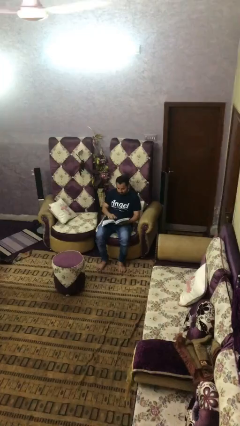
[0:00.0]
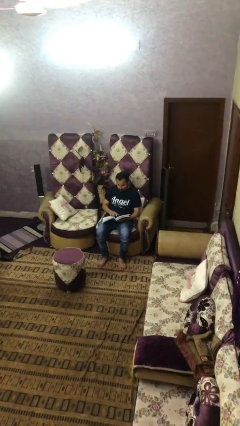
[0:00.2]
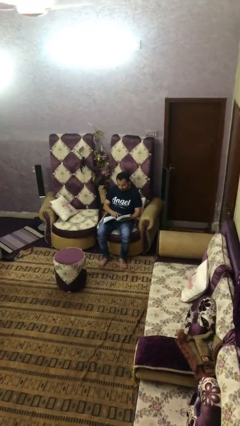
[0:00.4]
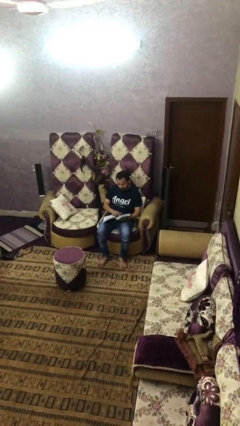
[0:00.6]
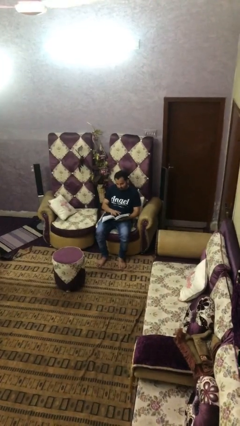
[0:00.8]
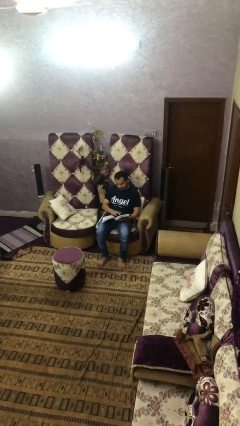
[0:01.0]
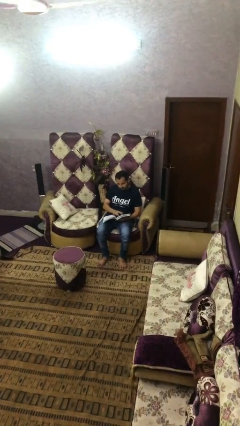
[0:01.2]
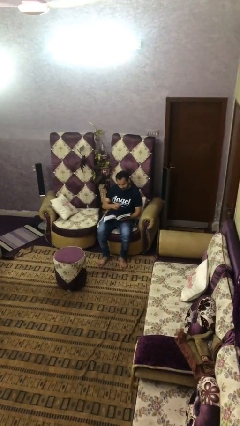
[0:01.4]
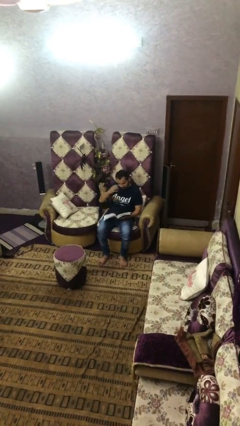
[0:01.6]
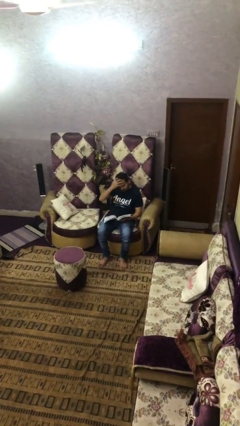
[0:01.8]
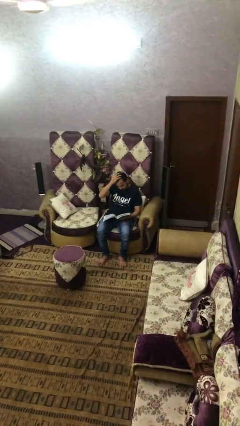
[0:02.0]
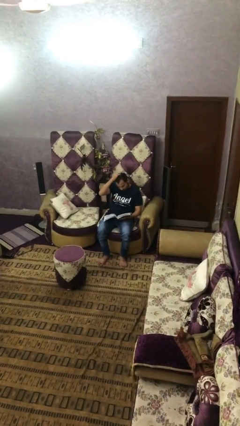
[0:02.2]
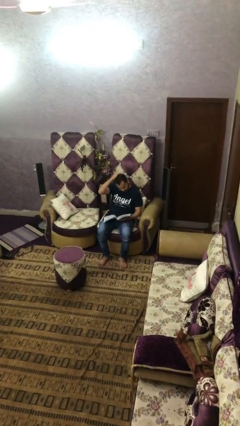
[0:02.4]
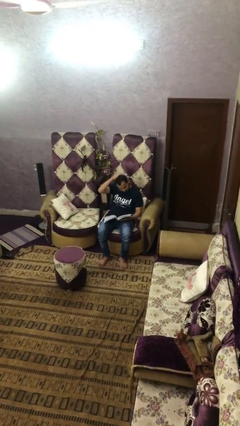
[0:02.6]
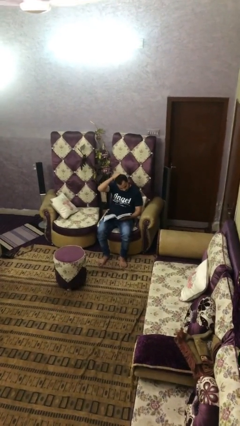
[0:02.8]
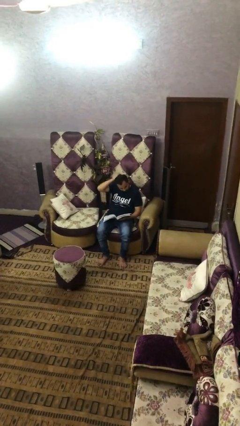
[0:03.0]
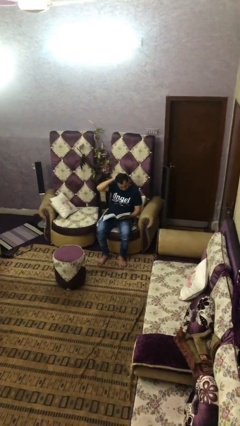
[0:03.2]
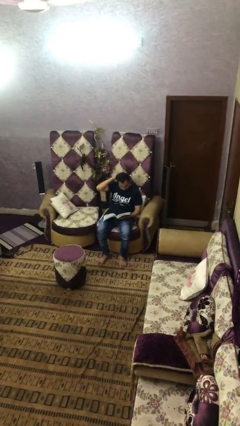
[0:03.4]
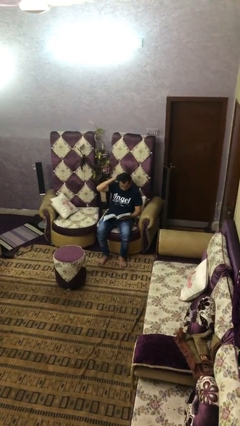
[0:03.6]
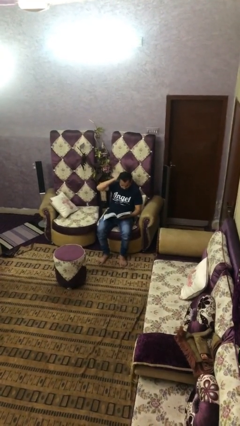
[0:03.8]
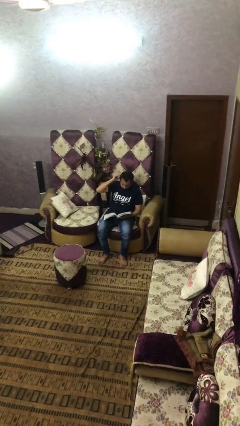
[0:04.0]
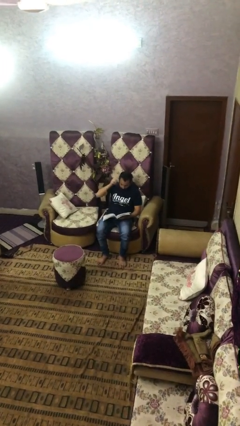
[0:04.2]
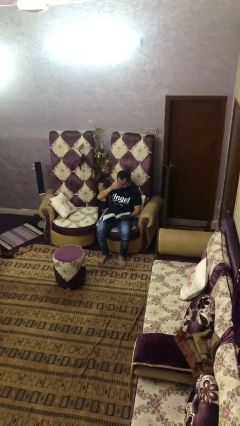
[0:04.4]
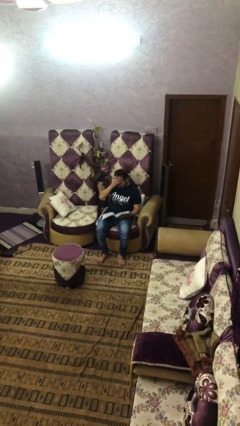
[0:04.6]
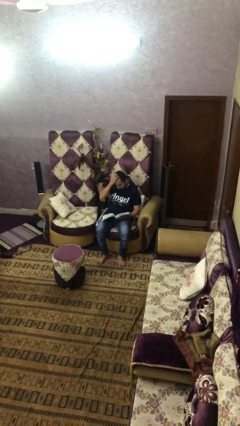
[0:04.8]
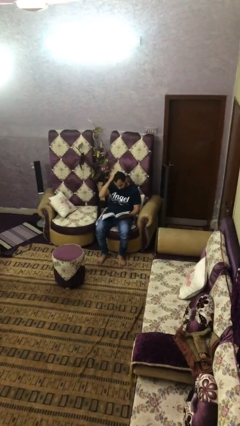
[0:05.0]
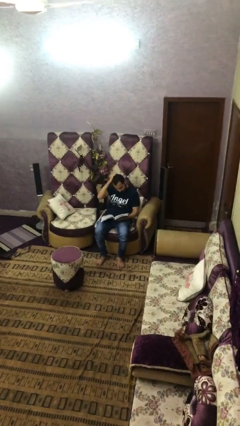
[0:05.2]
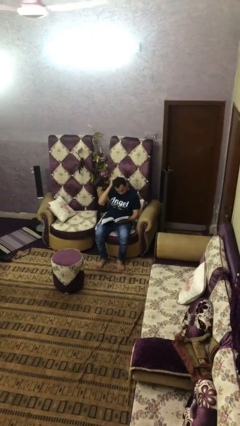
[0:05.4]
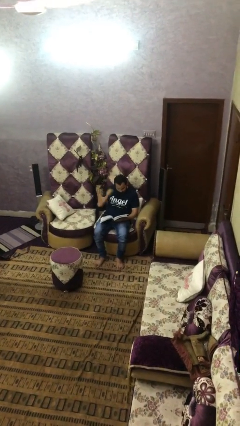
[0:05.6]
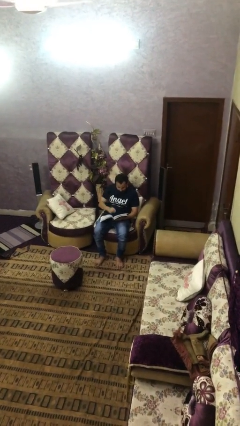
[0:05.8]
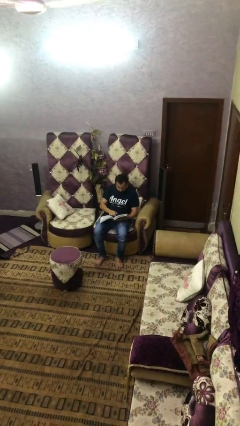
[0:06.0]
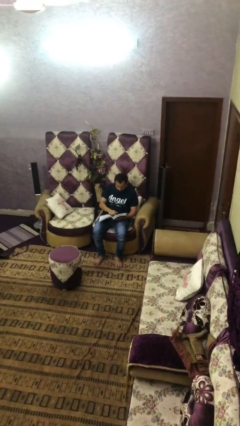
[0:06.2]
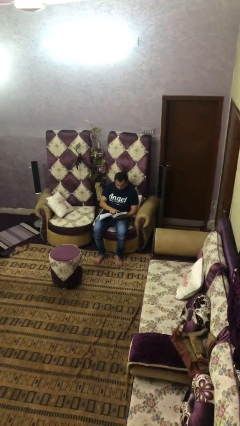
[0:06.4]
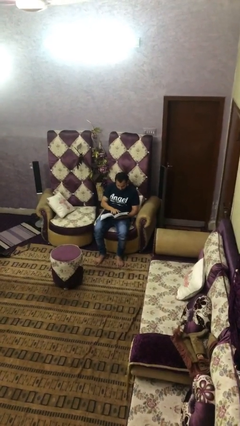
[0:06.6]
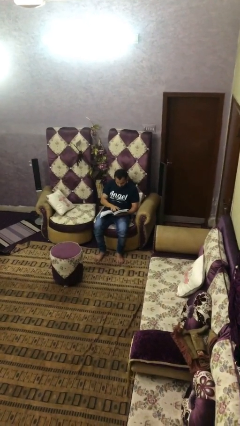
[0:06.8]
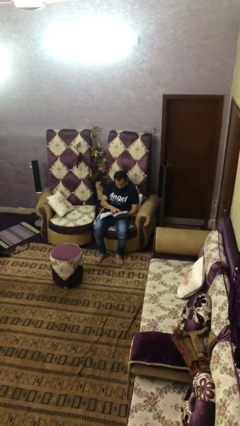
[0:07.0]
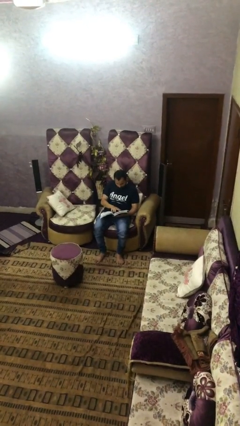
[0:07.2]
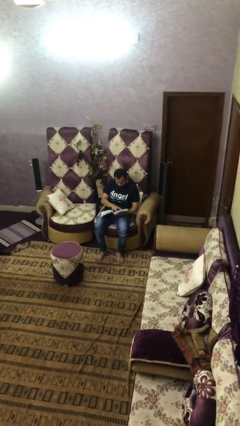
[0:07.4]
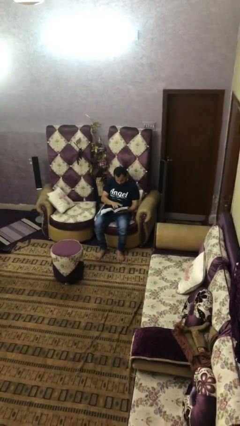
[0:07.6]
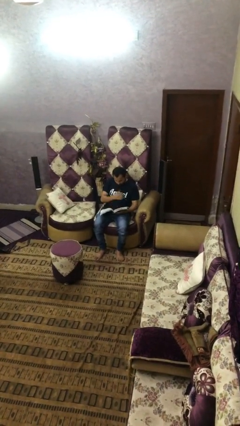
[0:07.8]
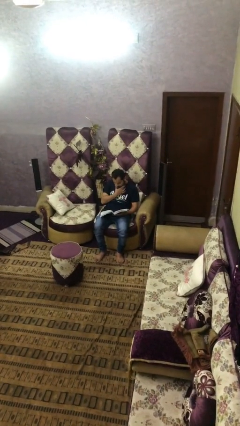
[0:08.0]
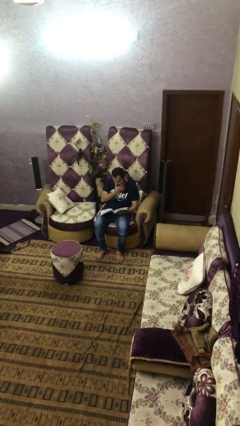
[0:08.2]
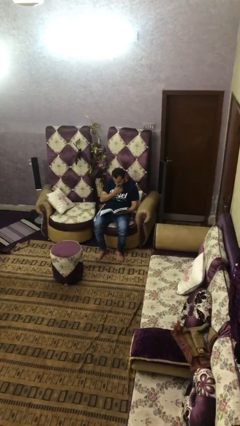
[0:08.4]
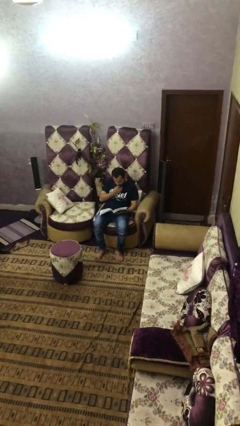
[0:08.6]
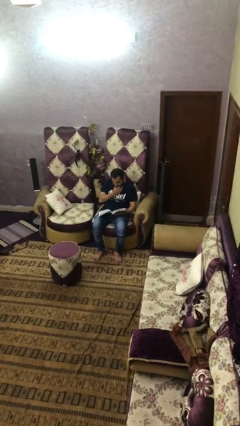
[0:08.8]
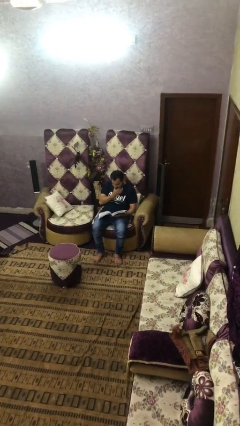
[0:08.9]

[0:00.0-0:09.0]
person reads document

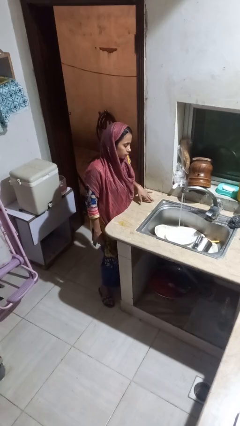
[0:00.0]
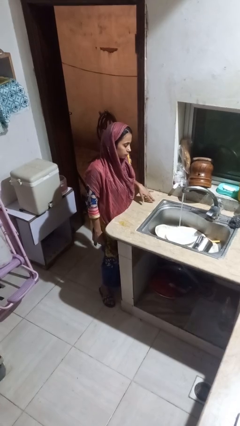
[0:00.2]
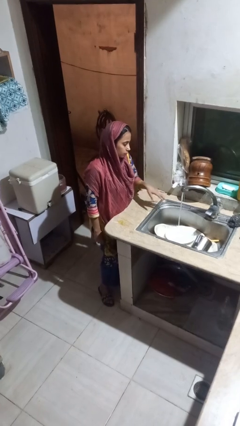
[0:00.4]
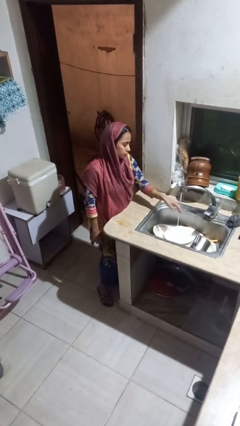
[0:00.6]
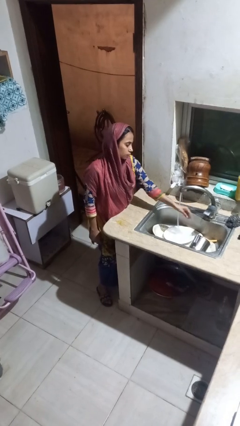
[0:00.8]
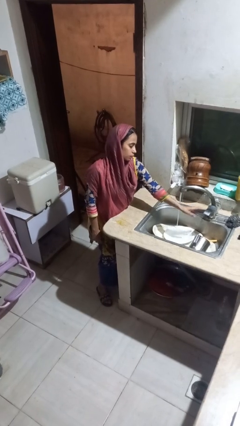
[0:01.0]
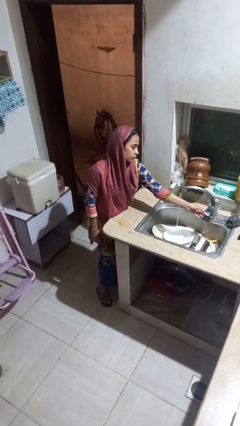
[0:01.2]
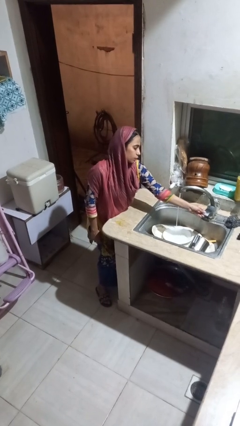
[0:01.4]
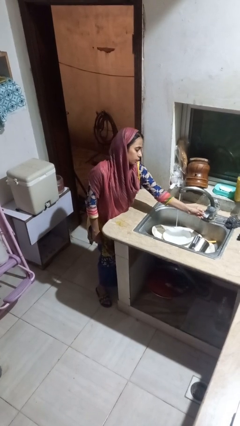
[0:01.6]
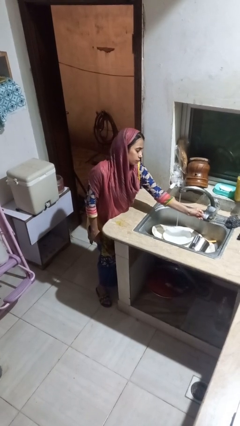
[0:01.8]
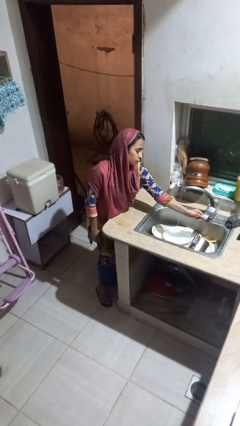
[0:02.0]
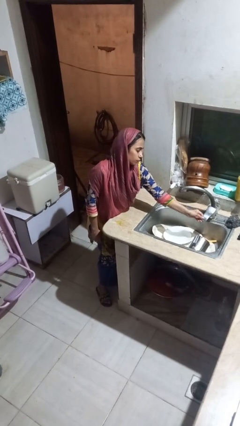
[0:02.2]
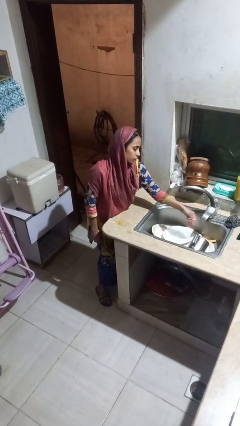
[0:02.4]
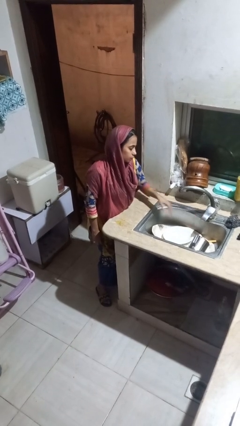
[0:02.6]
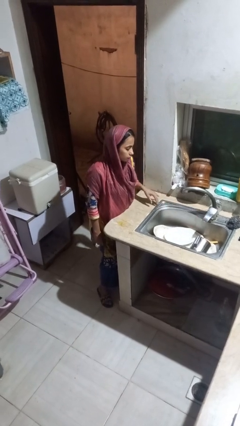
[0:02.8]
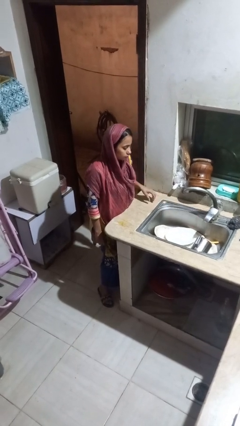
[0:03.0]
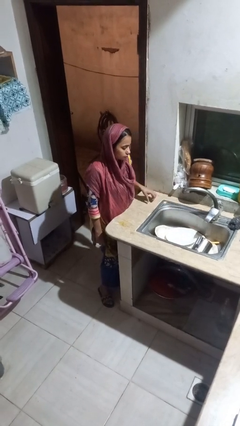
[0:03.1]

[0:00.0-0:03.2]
person turns off faucet

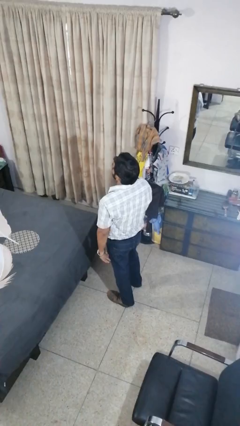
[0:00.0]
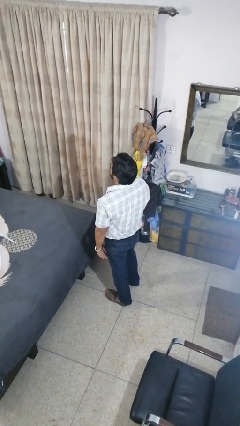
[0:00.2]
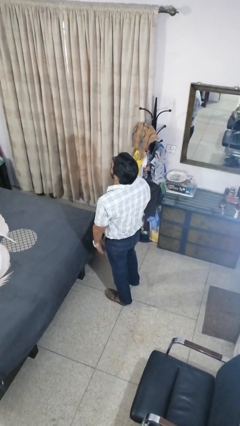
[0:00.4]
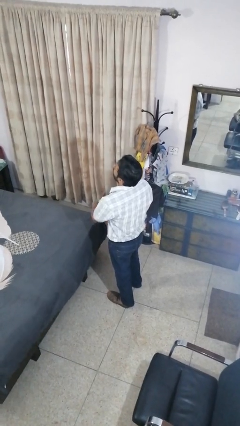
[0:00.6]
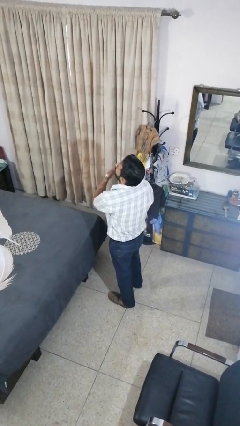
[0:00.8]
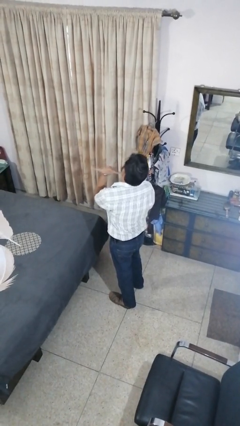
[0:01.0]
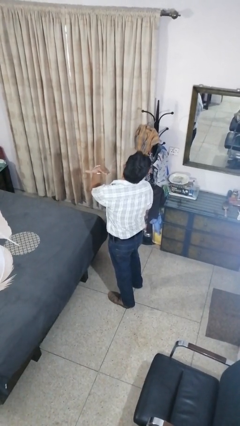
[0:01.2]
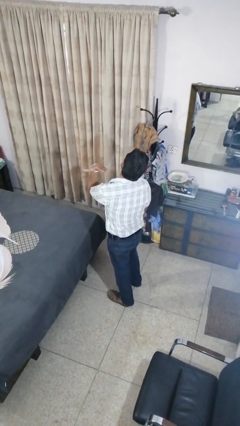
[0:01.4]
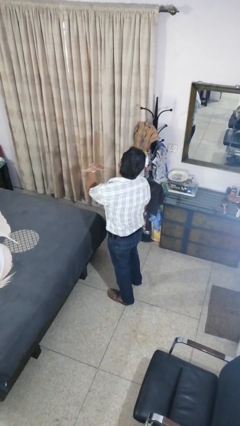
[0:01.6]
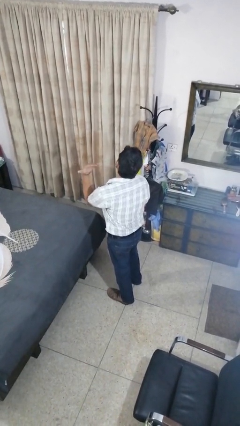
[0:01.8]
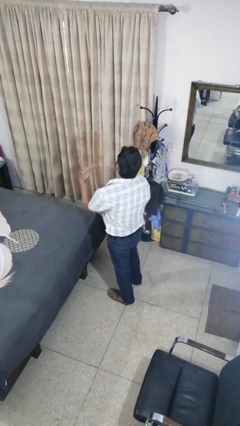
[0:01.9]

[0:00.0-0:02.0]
person gestures cut

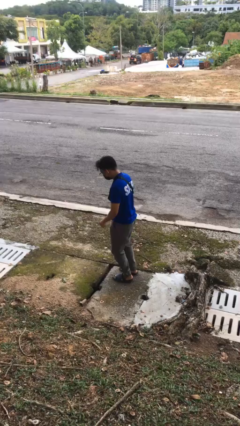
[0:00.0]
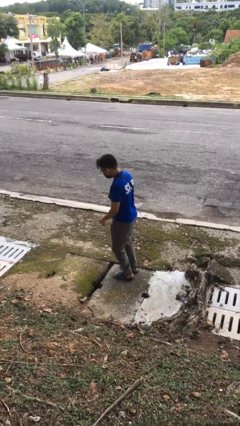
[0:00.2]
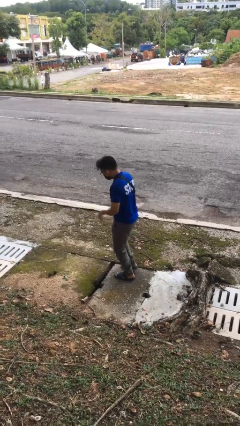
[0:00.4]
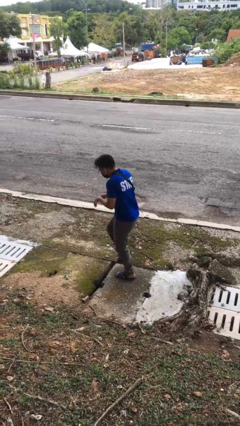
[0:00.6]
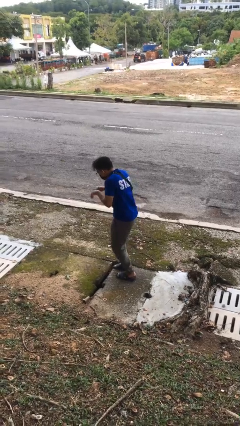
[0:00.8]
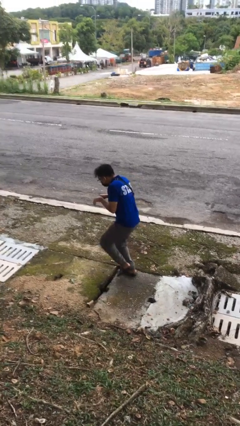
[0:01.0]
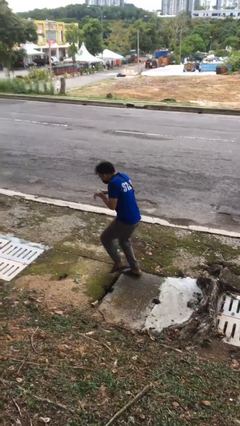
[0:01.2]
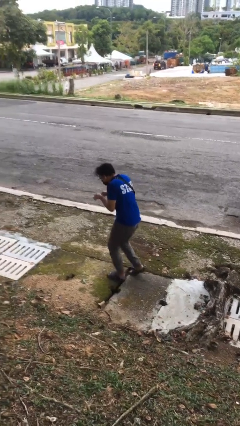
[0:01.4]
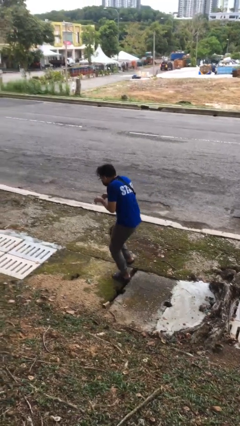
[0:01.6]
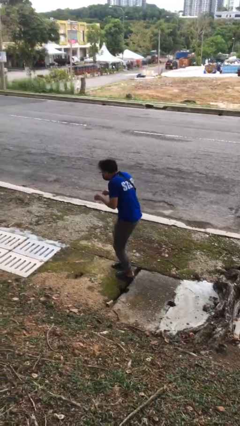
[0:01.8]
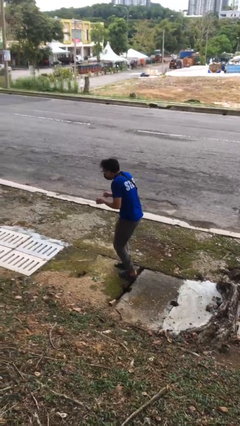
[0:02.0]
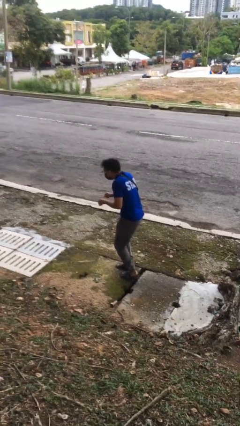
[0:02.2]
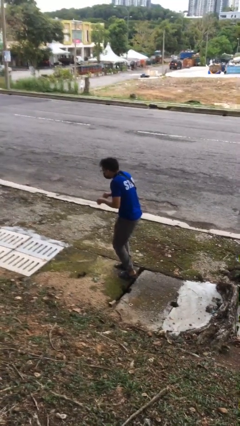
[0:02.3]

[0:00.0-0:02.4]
person walks tiptoe

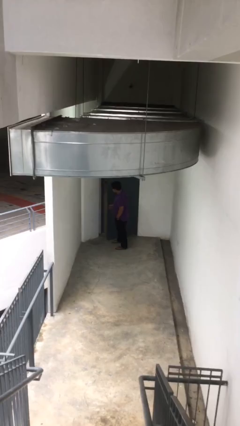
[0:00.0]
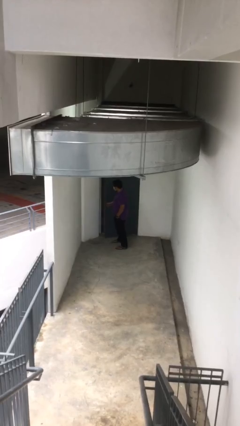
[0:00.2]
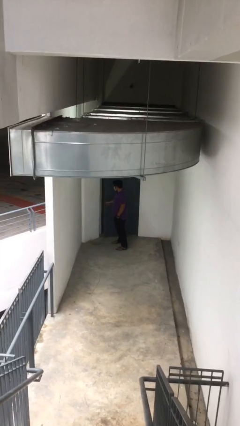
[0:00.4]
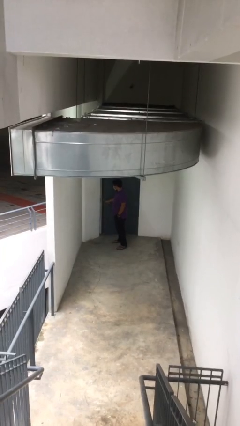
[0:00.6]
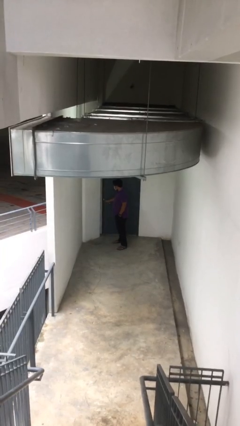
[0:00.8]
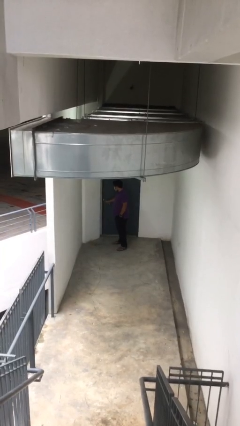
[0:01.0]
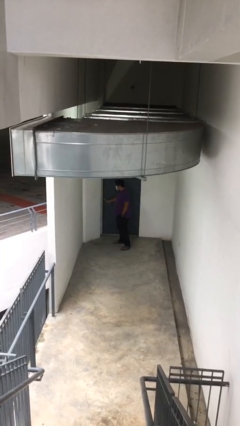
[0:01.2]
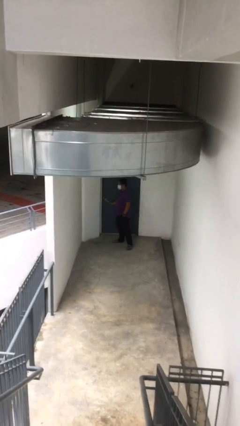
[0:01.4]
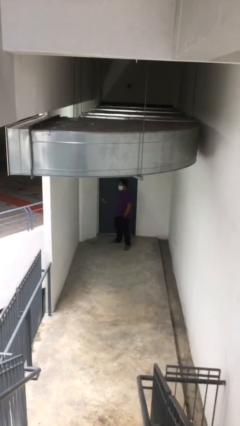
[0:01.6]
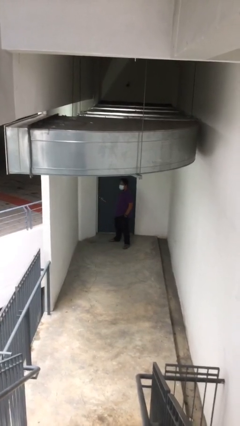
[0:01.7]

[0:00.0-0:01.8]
person closes facility door
